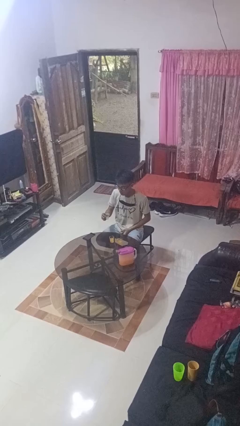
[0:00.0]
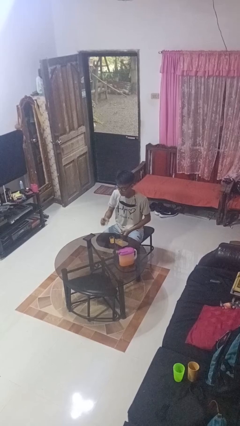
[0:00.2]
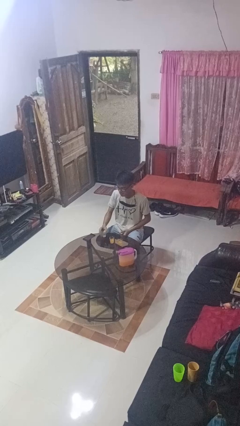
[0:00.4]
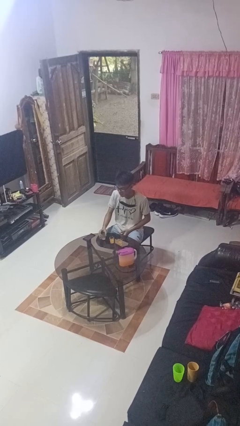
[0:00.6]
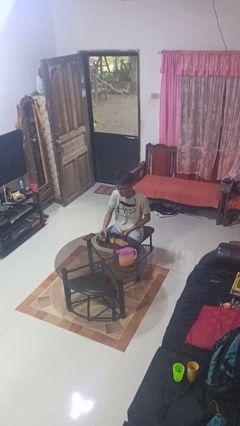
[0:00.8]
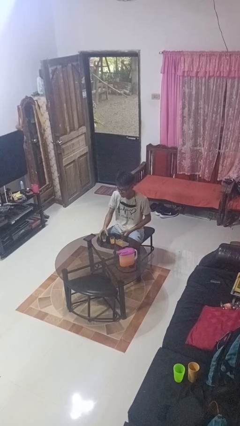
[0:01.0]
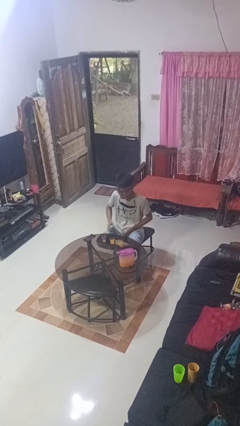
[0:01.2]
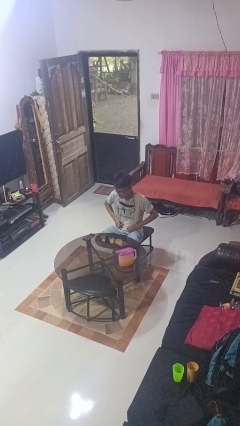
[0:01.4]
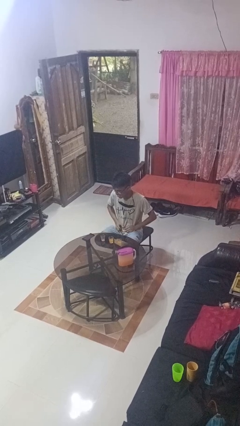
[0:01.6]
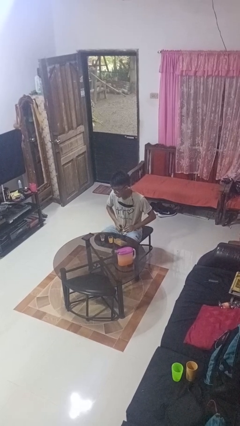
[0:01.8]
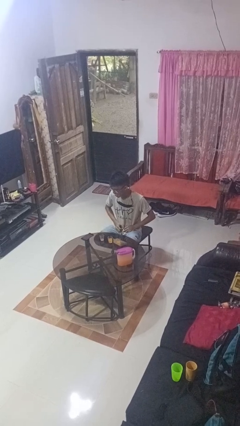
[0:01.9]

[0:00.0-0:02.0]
person puts down object on table

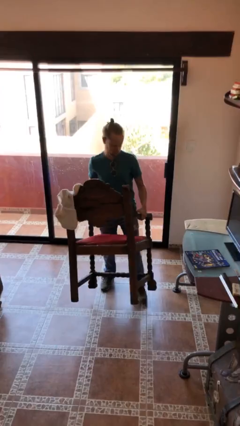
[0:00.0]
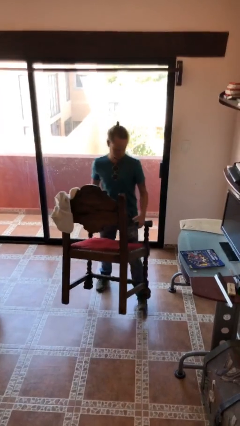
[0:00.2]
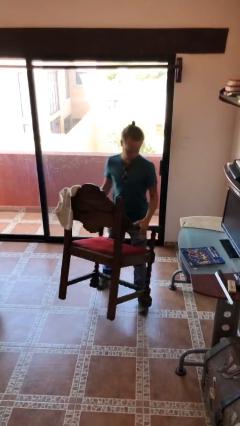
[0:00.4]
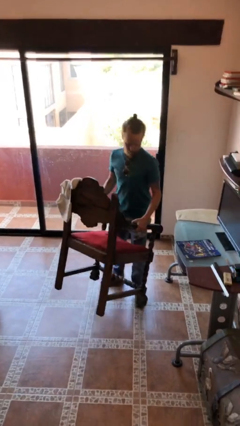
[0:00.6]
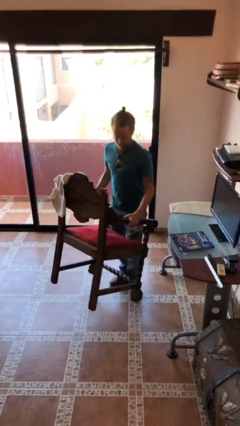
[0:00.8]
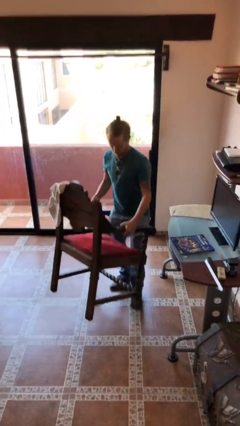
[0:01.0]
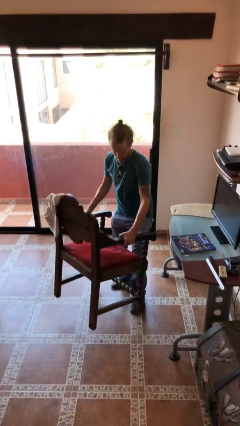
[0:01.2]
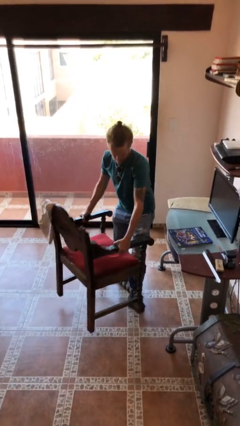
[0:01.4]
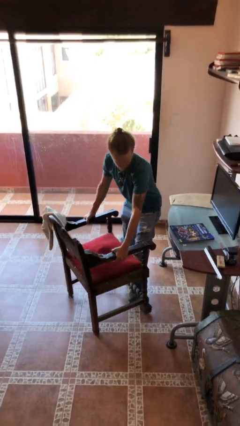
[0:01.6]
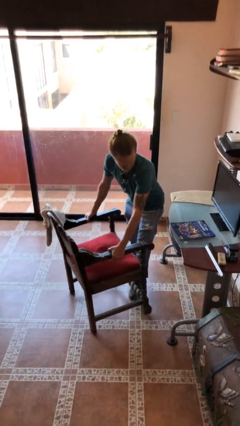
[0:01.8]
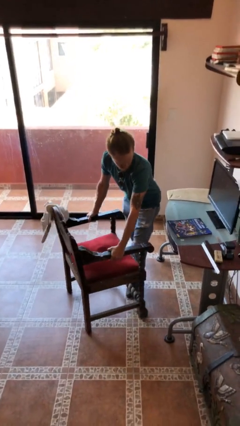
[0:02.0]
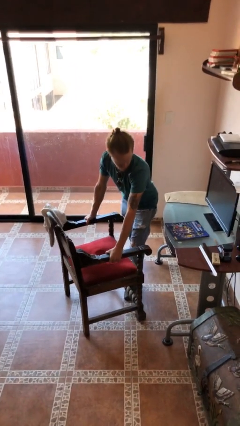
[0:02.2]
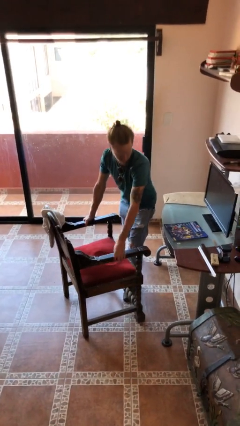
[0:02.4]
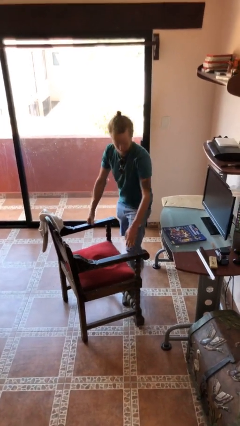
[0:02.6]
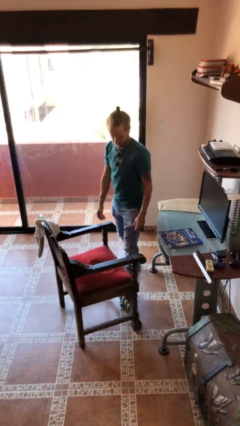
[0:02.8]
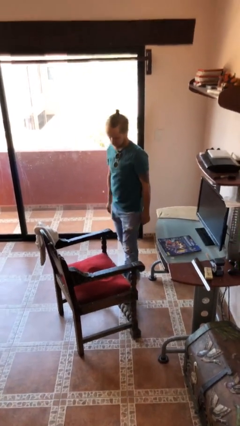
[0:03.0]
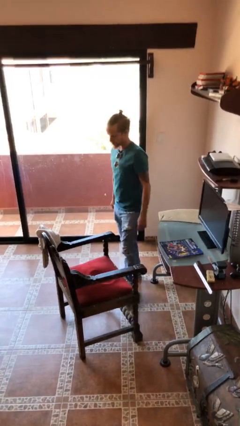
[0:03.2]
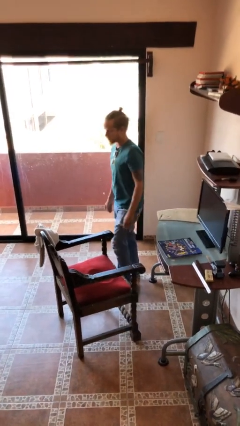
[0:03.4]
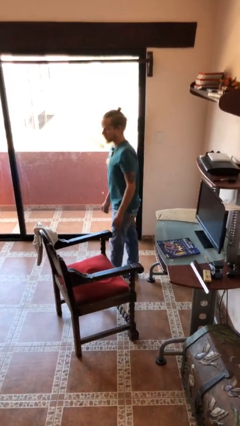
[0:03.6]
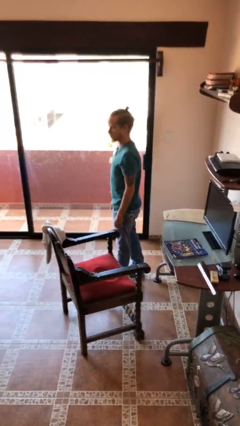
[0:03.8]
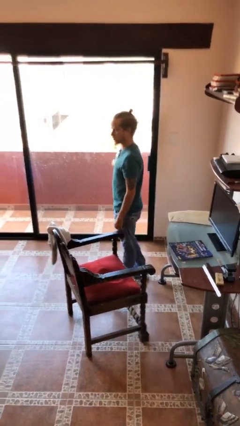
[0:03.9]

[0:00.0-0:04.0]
person puts down object on floor

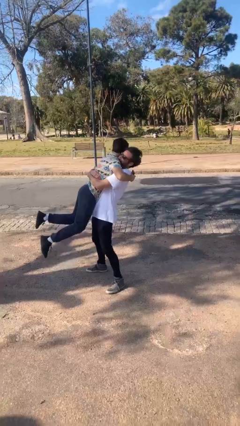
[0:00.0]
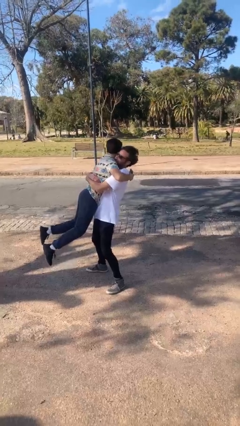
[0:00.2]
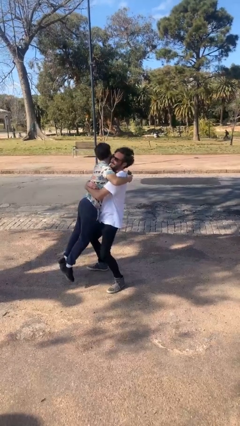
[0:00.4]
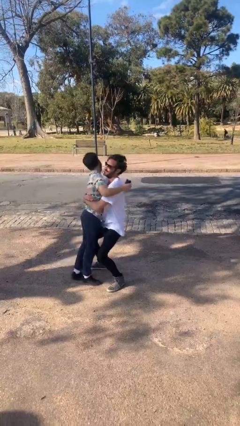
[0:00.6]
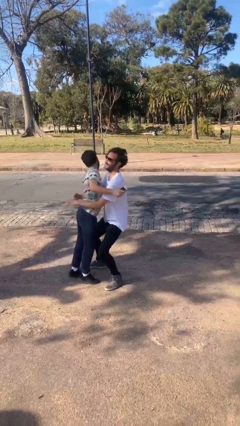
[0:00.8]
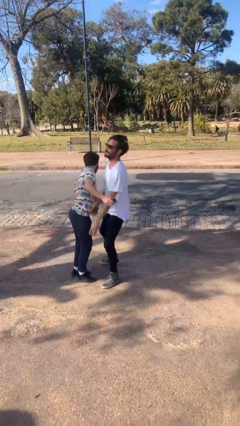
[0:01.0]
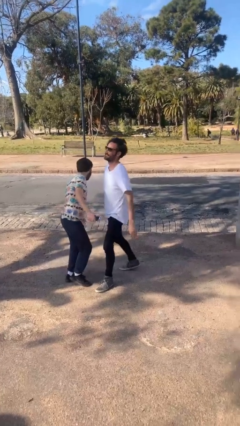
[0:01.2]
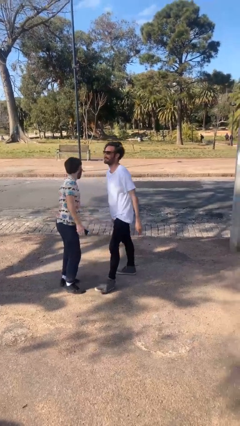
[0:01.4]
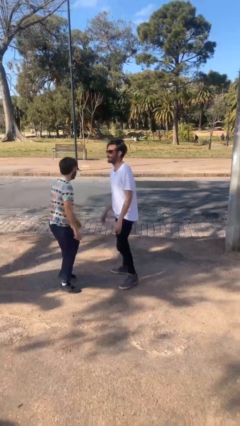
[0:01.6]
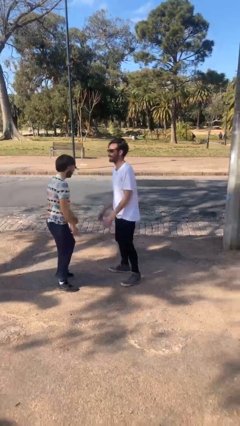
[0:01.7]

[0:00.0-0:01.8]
person puts down person

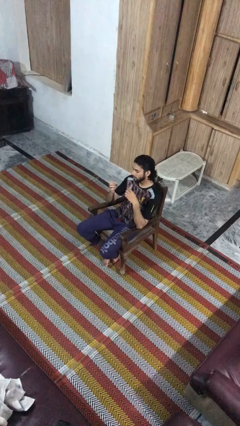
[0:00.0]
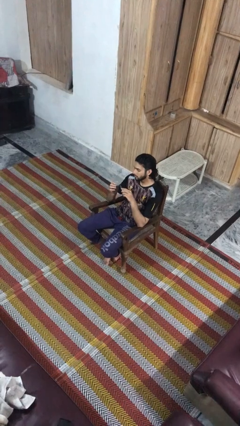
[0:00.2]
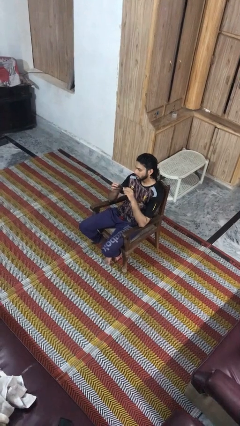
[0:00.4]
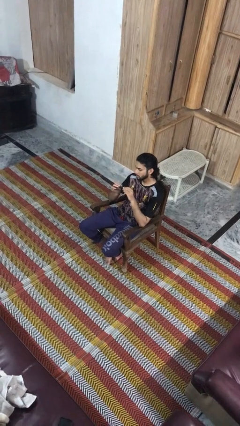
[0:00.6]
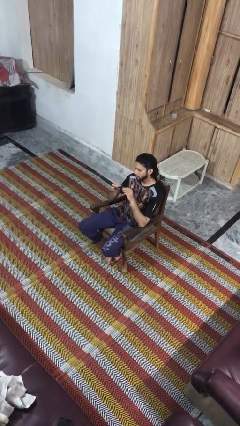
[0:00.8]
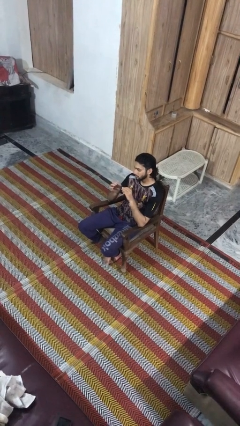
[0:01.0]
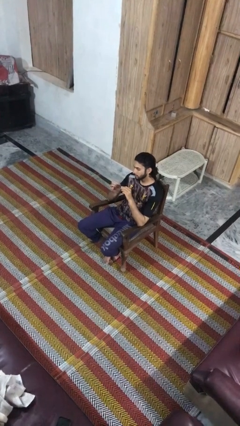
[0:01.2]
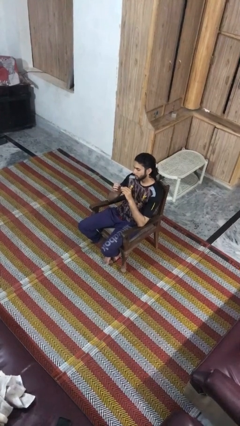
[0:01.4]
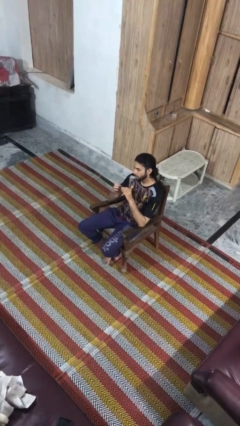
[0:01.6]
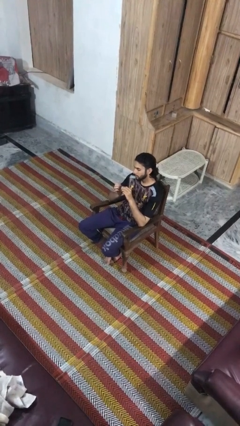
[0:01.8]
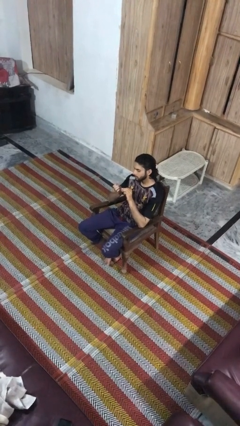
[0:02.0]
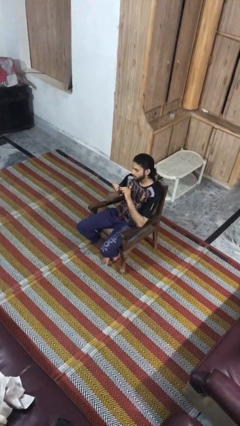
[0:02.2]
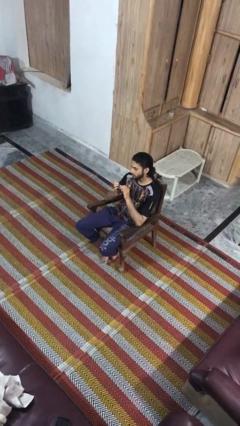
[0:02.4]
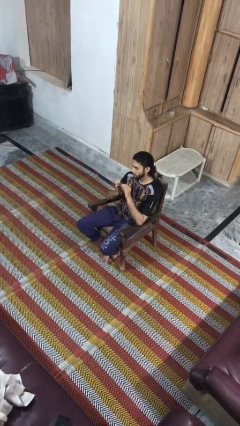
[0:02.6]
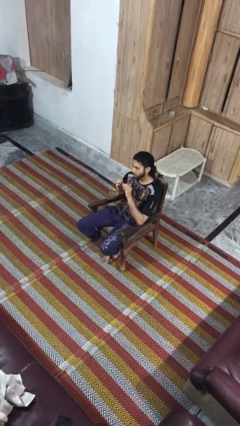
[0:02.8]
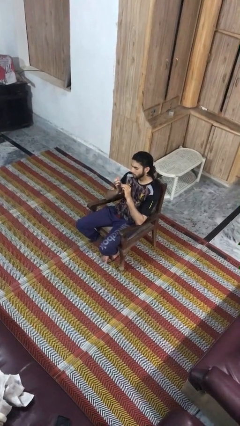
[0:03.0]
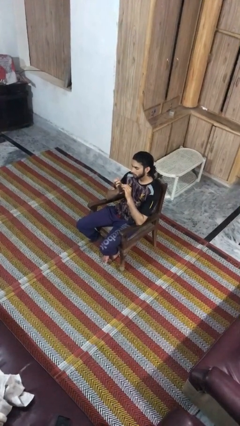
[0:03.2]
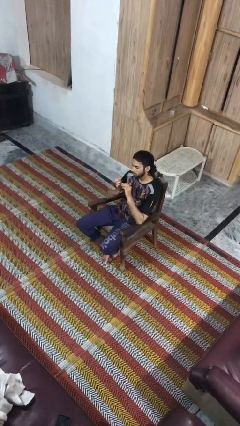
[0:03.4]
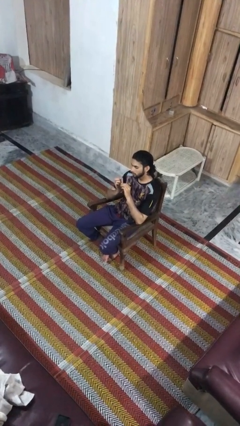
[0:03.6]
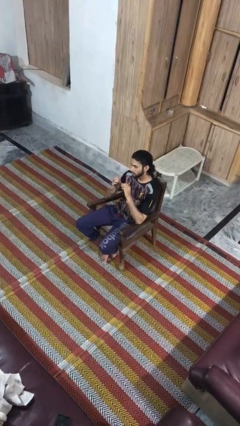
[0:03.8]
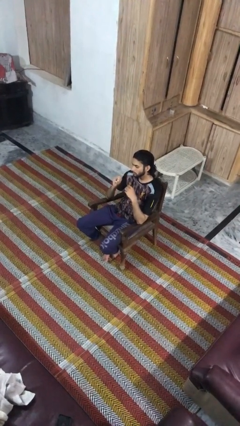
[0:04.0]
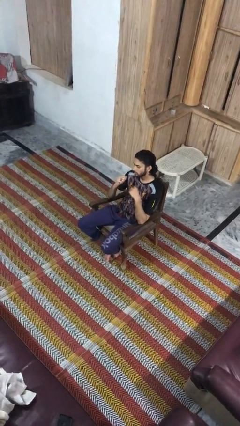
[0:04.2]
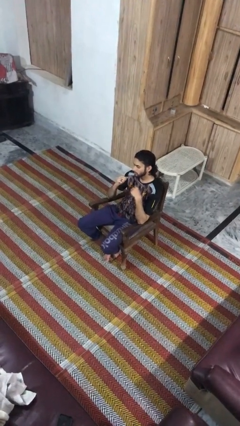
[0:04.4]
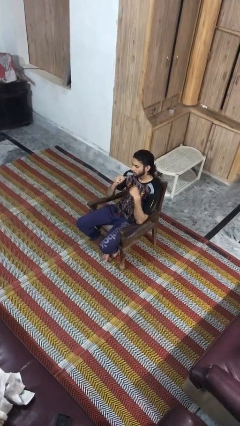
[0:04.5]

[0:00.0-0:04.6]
person files fingernails

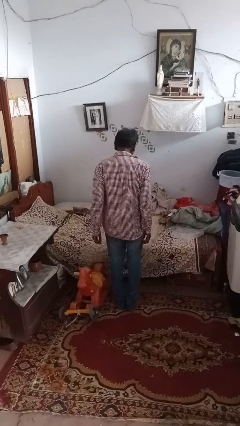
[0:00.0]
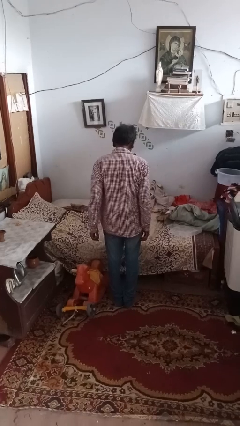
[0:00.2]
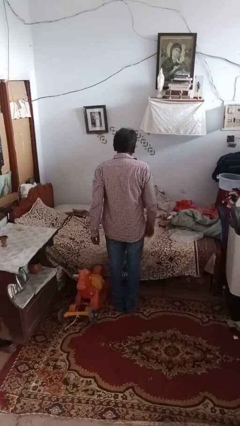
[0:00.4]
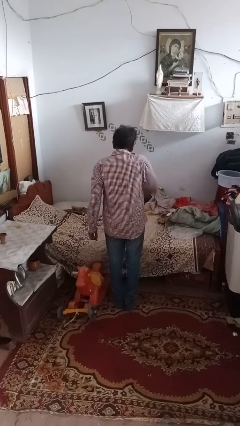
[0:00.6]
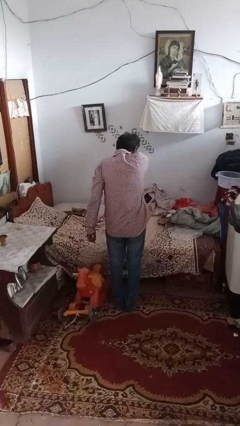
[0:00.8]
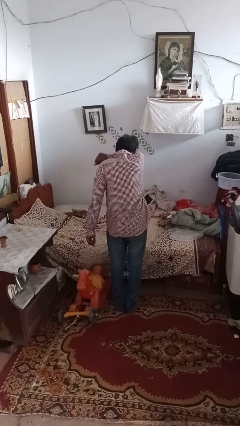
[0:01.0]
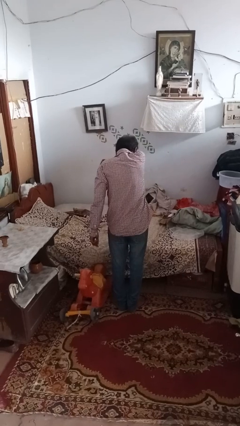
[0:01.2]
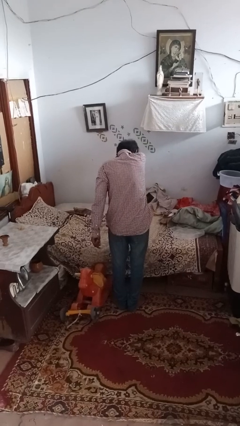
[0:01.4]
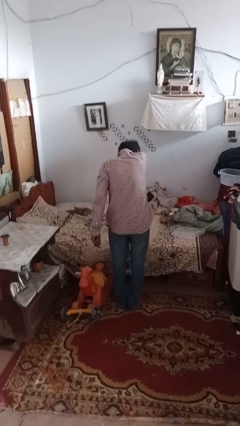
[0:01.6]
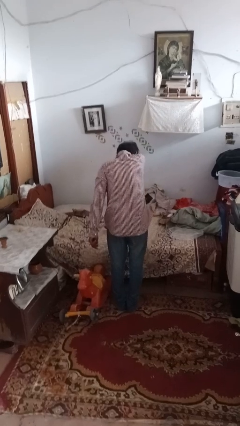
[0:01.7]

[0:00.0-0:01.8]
person sneezes into hand

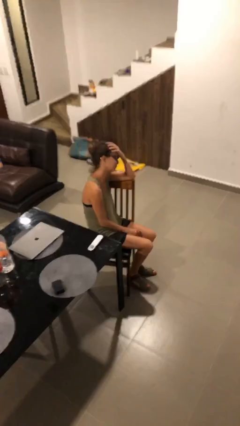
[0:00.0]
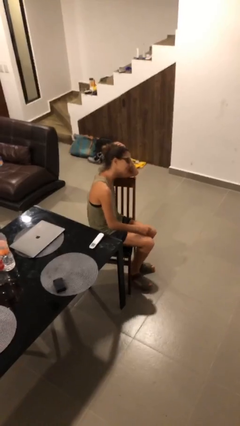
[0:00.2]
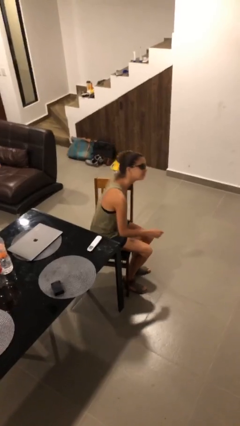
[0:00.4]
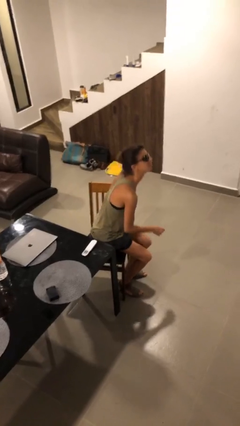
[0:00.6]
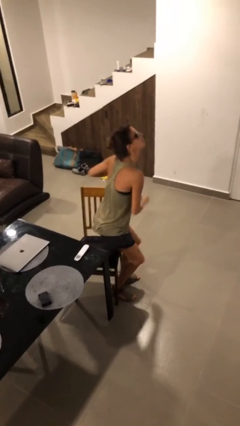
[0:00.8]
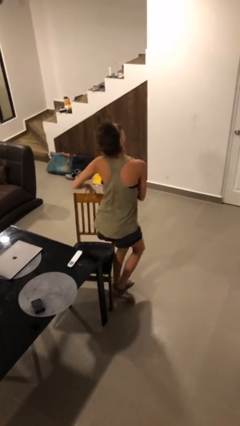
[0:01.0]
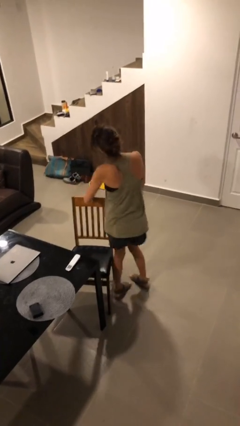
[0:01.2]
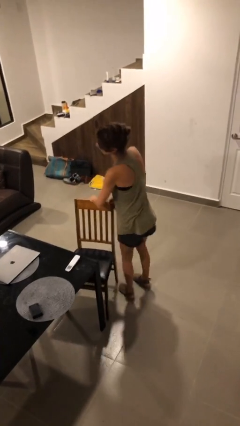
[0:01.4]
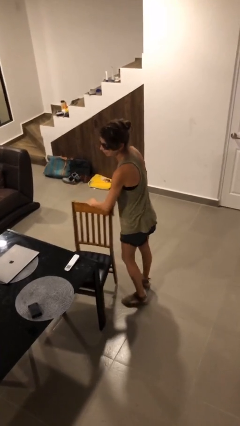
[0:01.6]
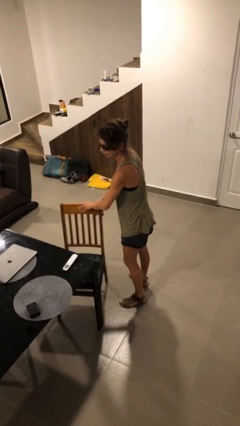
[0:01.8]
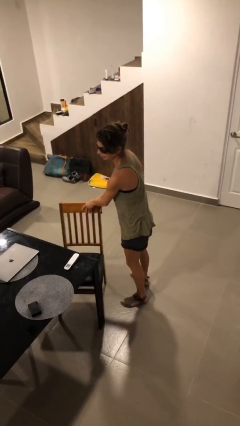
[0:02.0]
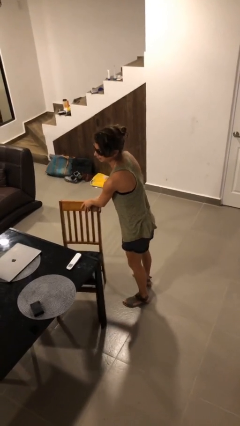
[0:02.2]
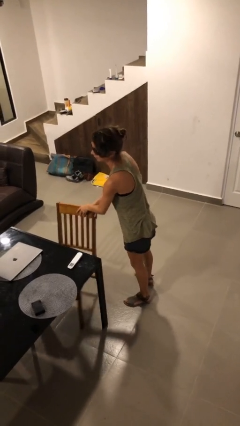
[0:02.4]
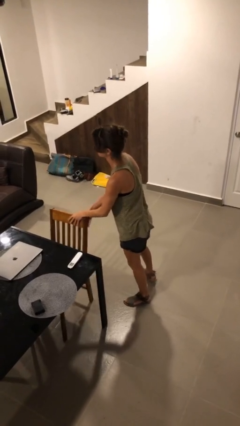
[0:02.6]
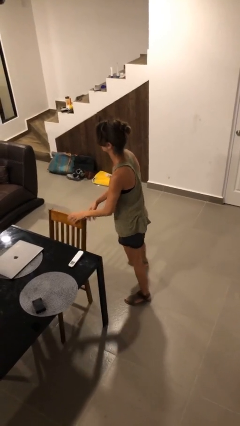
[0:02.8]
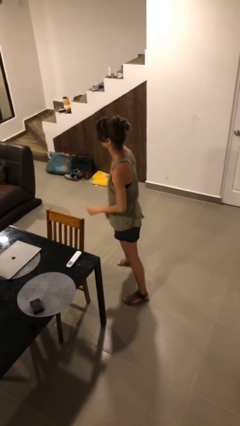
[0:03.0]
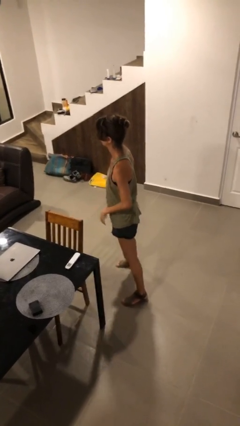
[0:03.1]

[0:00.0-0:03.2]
person stands up
